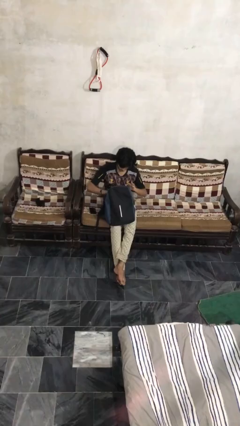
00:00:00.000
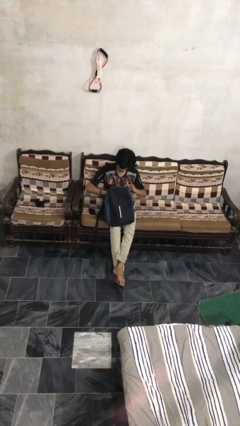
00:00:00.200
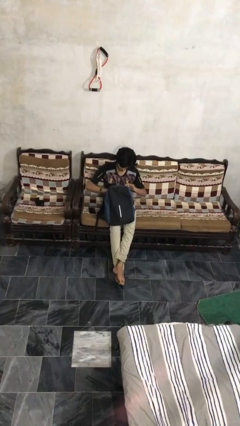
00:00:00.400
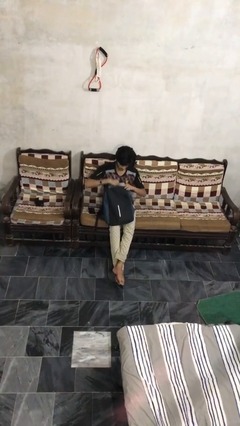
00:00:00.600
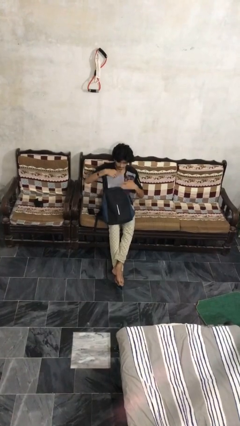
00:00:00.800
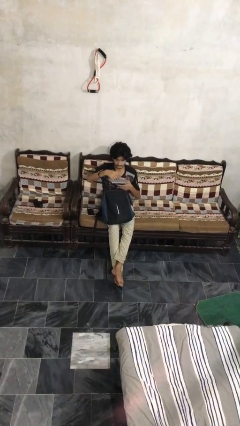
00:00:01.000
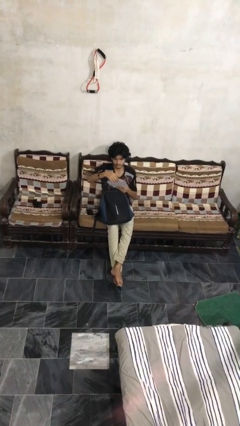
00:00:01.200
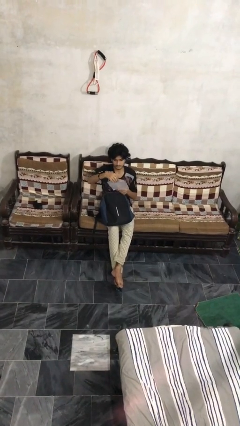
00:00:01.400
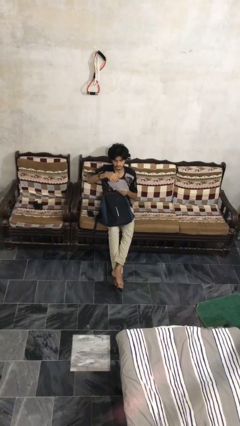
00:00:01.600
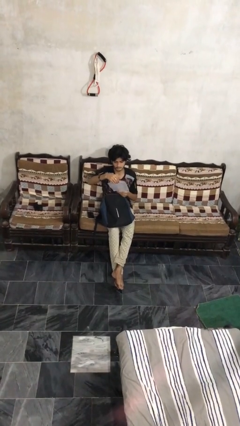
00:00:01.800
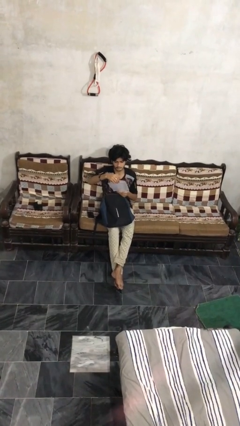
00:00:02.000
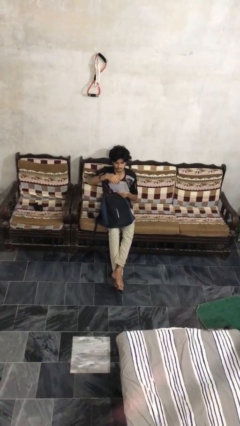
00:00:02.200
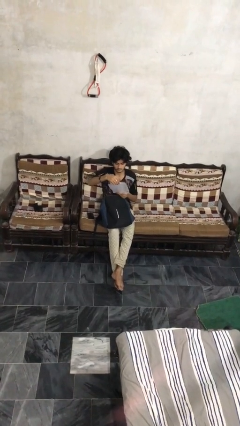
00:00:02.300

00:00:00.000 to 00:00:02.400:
person takes object from backpack

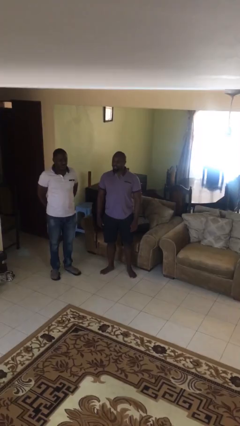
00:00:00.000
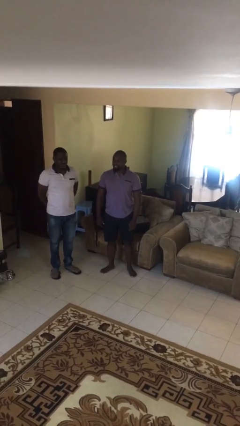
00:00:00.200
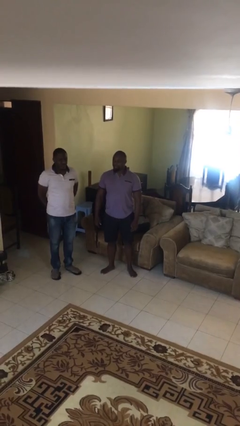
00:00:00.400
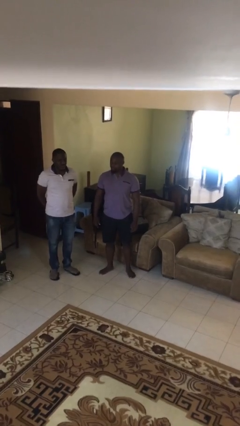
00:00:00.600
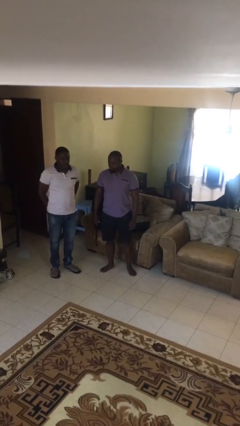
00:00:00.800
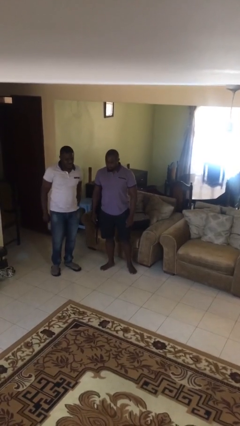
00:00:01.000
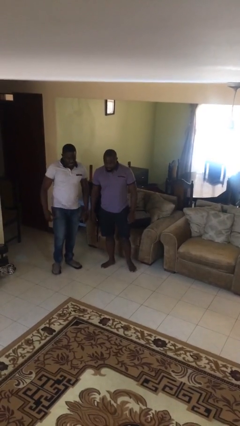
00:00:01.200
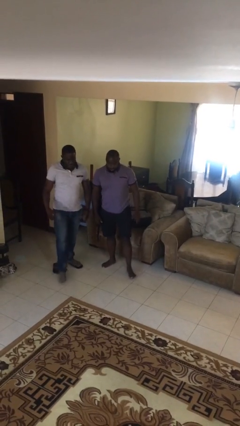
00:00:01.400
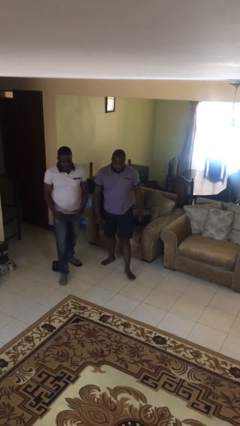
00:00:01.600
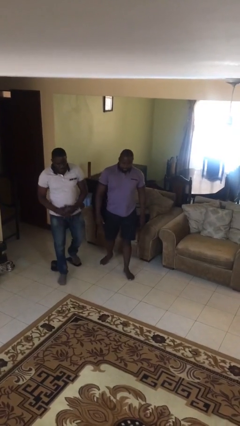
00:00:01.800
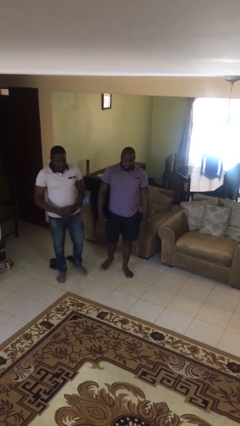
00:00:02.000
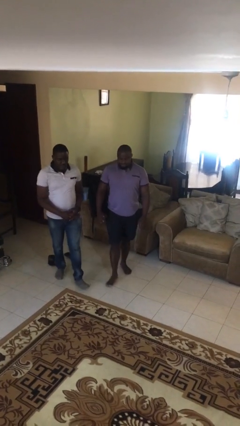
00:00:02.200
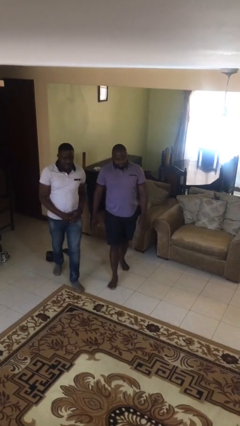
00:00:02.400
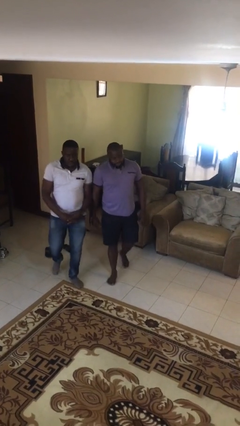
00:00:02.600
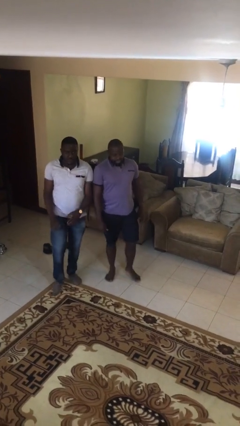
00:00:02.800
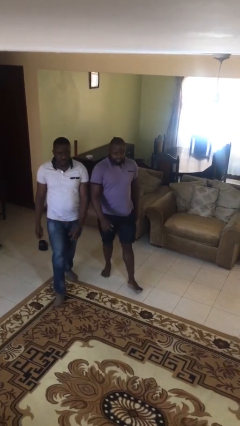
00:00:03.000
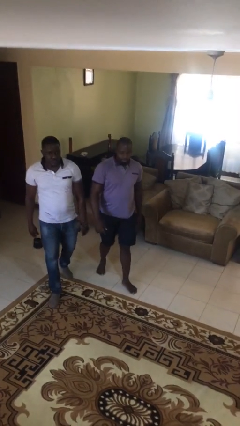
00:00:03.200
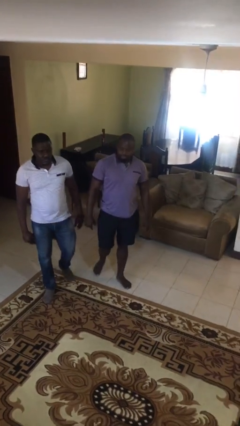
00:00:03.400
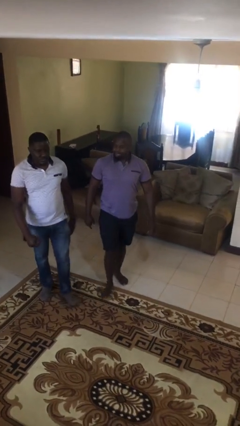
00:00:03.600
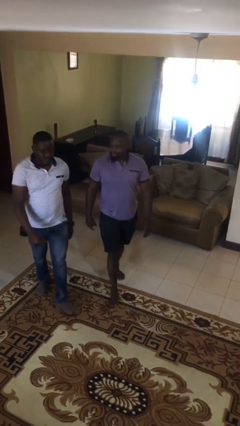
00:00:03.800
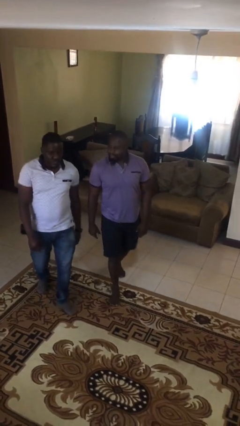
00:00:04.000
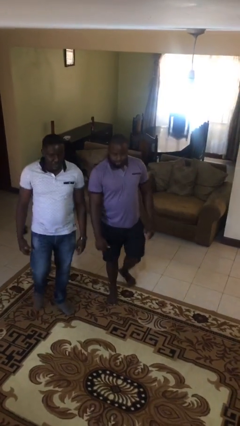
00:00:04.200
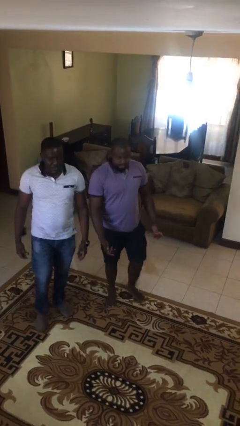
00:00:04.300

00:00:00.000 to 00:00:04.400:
person talks to person

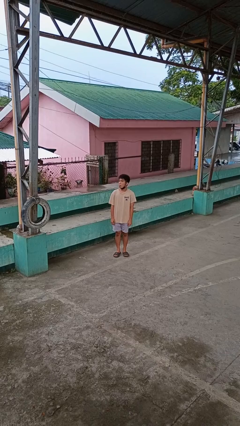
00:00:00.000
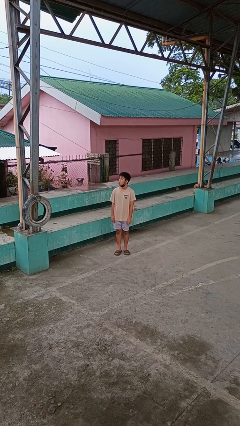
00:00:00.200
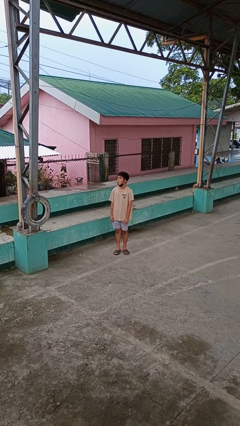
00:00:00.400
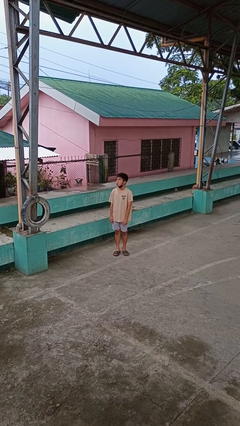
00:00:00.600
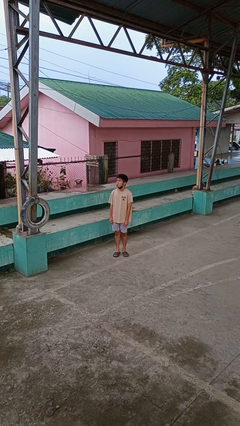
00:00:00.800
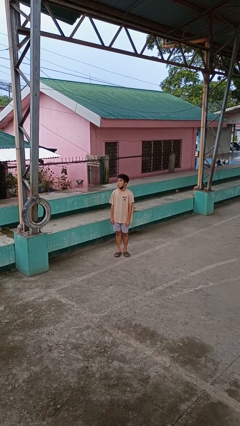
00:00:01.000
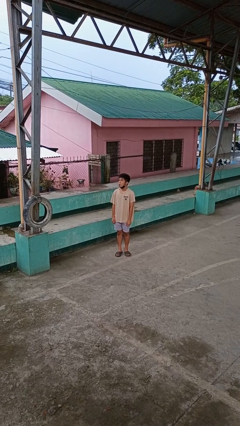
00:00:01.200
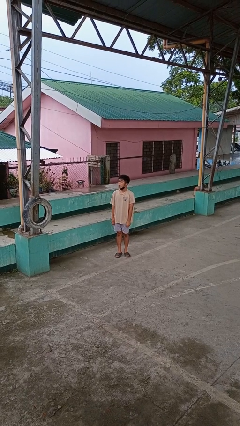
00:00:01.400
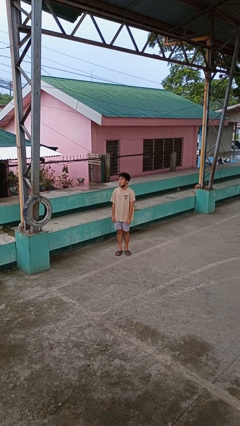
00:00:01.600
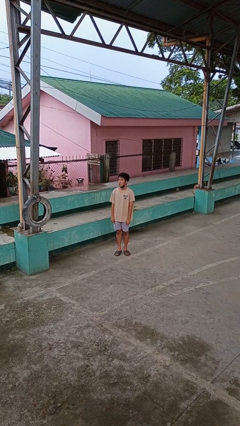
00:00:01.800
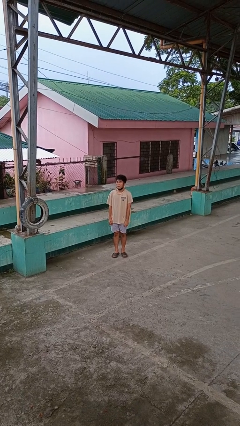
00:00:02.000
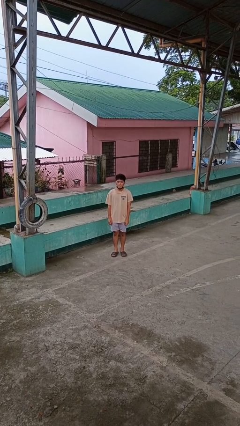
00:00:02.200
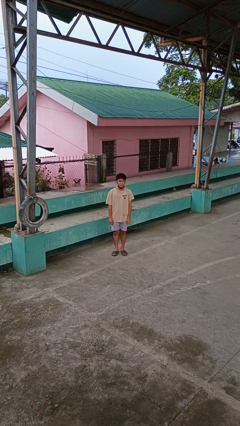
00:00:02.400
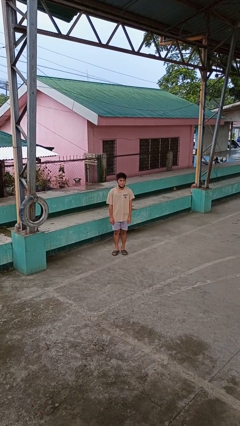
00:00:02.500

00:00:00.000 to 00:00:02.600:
person sticks out tongue

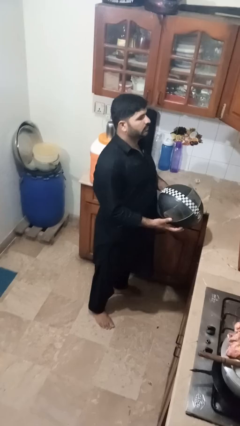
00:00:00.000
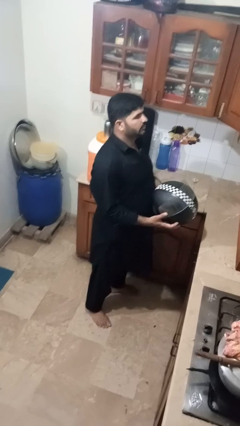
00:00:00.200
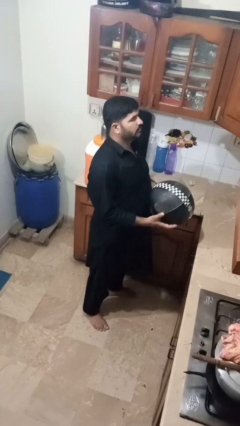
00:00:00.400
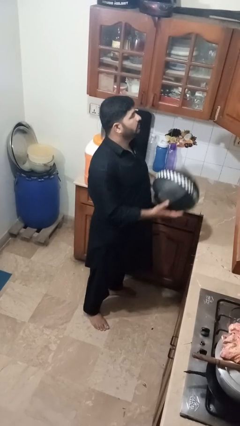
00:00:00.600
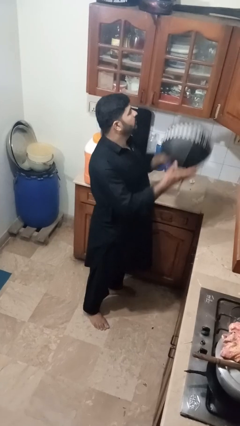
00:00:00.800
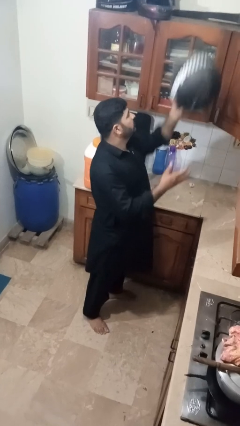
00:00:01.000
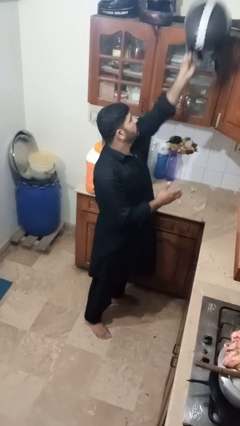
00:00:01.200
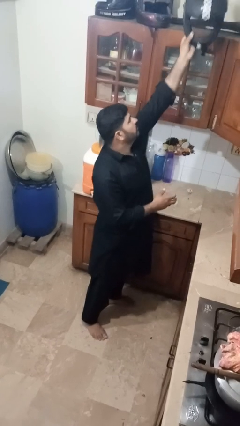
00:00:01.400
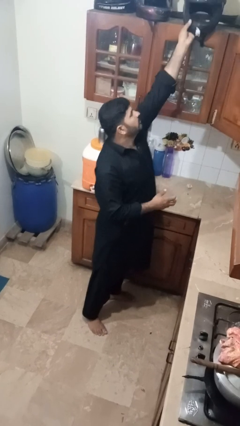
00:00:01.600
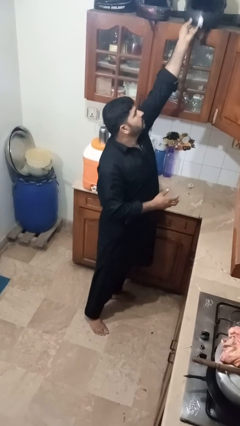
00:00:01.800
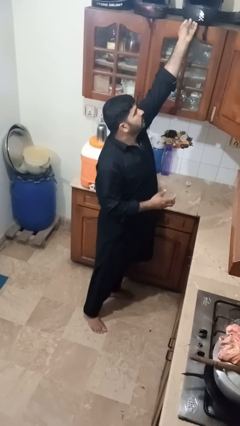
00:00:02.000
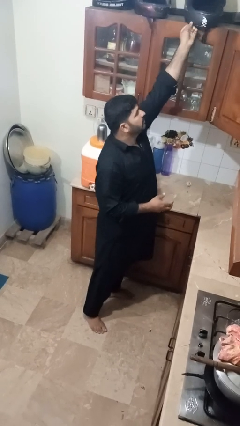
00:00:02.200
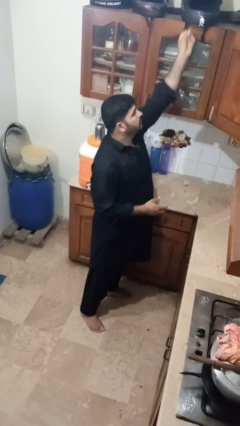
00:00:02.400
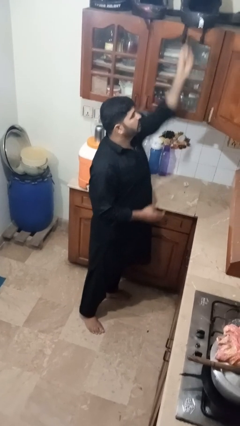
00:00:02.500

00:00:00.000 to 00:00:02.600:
person puts down object on shelf

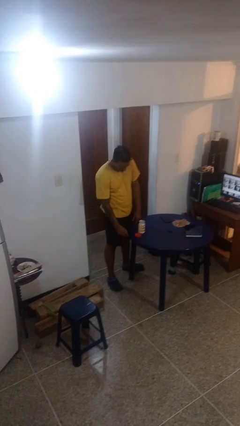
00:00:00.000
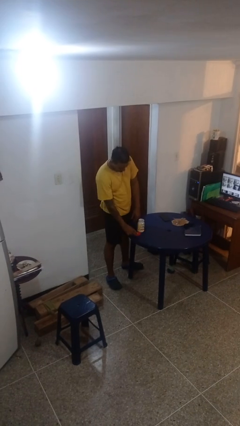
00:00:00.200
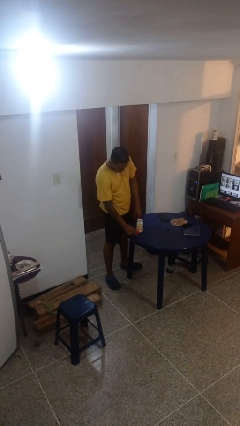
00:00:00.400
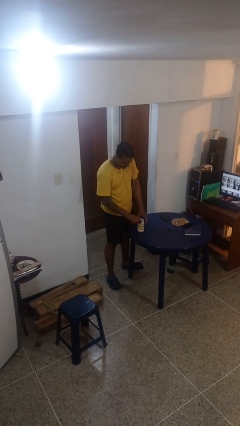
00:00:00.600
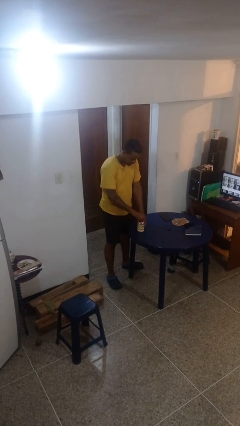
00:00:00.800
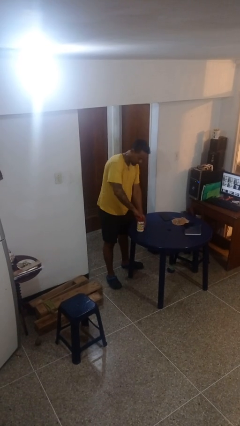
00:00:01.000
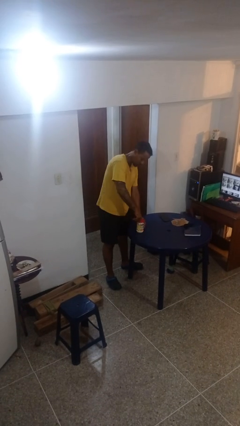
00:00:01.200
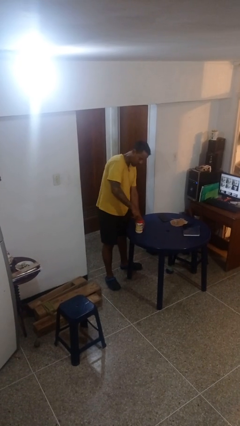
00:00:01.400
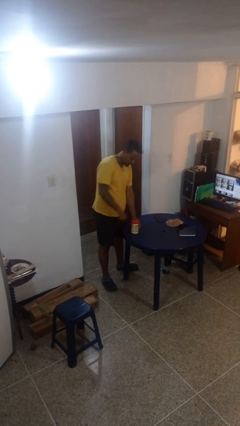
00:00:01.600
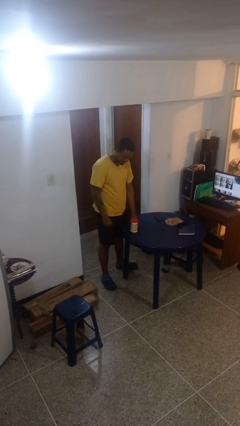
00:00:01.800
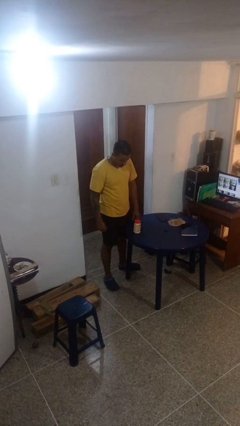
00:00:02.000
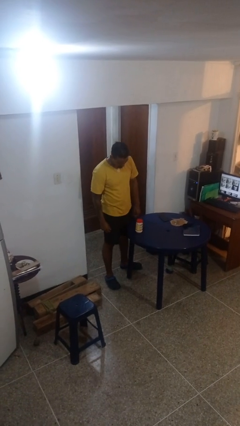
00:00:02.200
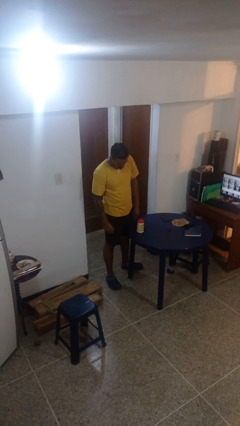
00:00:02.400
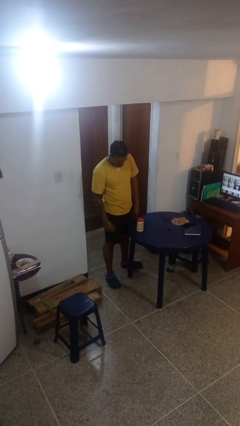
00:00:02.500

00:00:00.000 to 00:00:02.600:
person closes jar

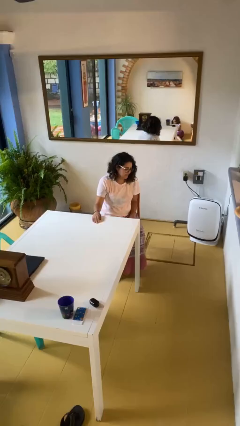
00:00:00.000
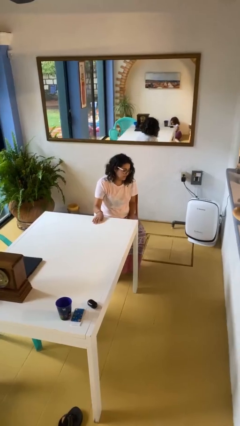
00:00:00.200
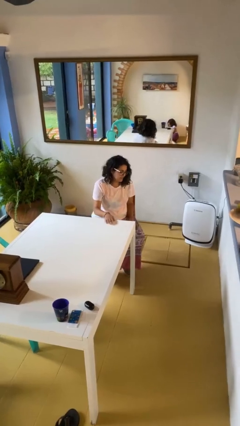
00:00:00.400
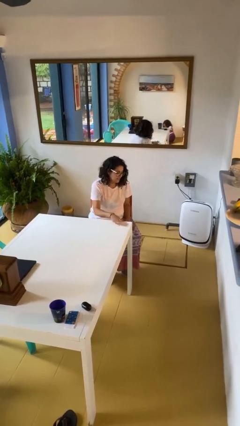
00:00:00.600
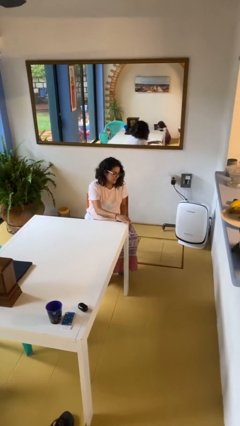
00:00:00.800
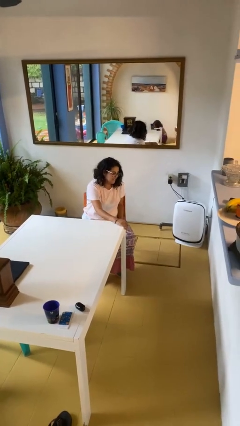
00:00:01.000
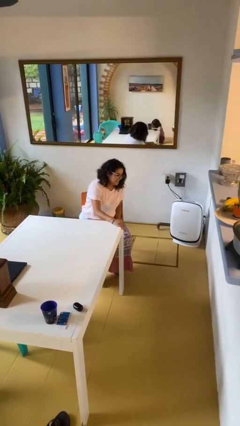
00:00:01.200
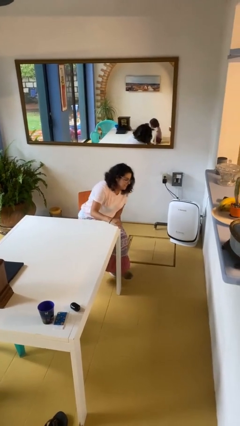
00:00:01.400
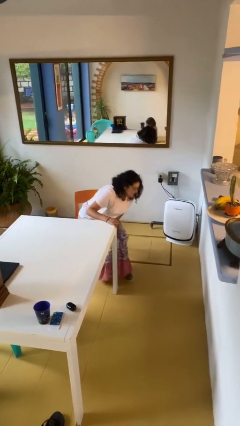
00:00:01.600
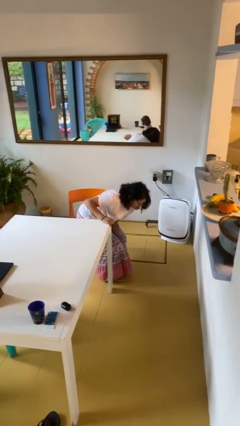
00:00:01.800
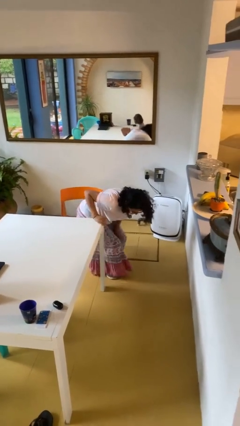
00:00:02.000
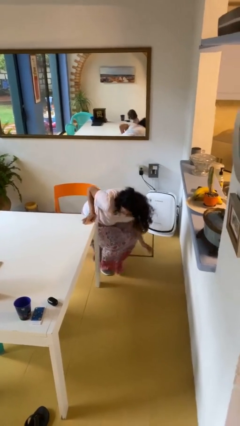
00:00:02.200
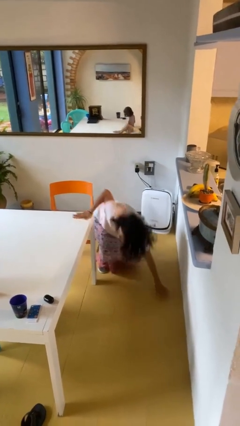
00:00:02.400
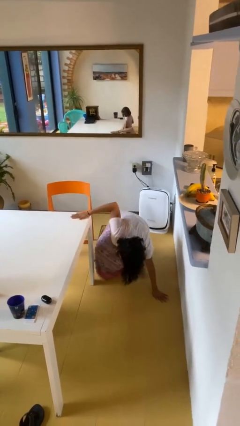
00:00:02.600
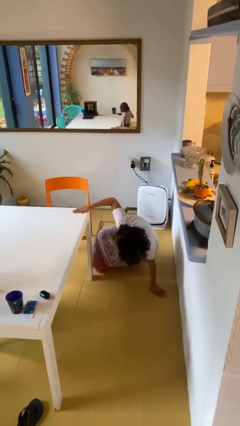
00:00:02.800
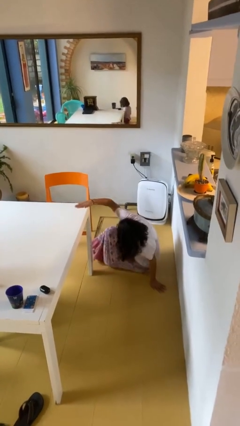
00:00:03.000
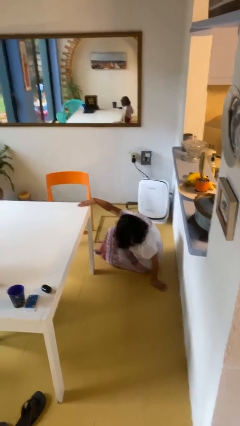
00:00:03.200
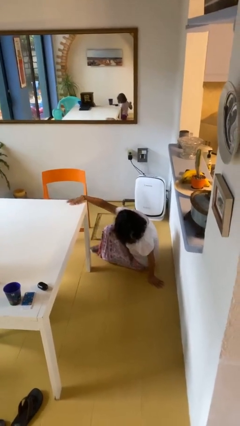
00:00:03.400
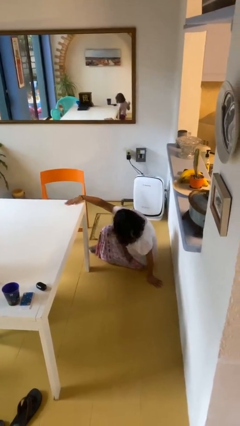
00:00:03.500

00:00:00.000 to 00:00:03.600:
person falls from chair
